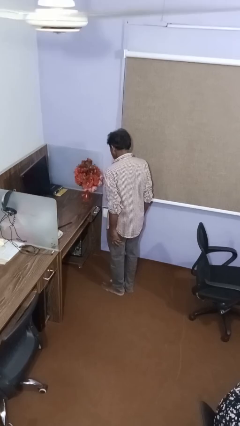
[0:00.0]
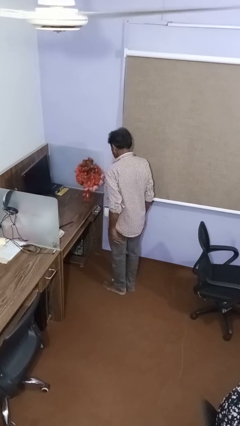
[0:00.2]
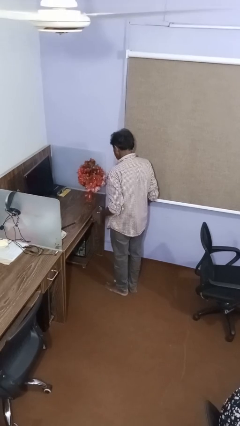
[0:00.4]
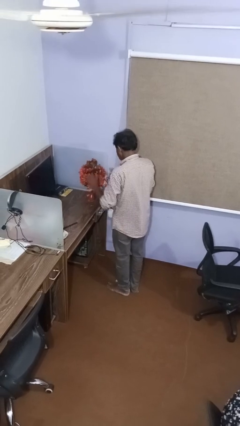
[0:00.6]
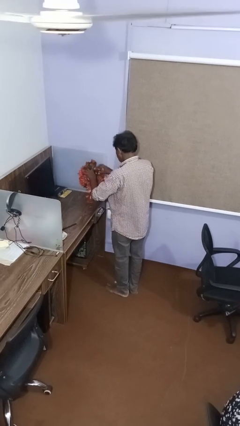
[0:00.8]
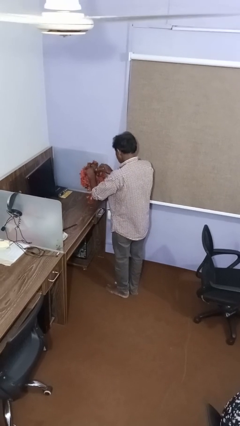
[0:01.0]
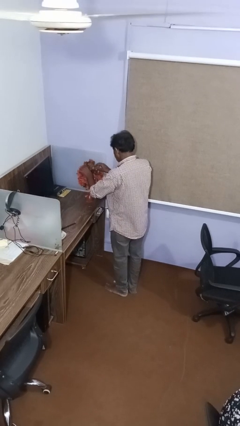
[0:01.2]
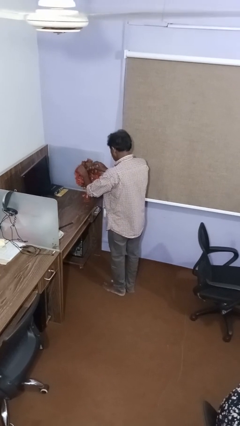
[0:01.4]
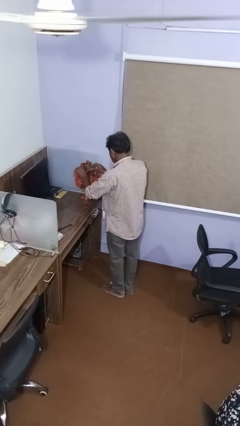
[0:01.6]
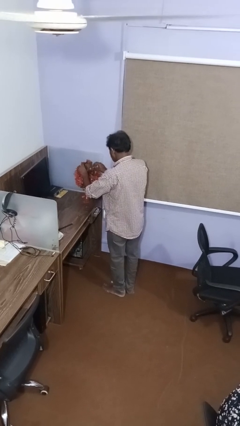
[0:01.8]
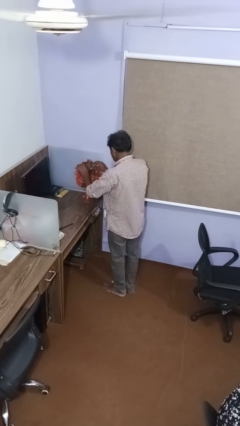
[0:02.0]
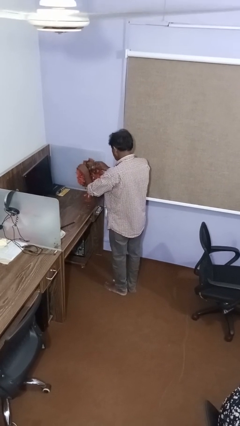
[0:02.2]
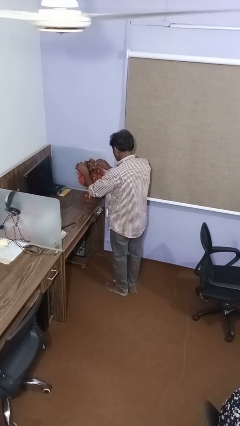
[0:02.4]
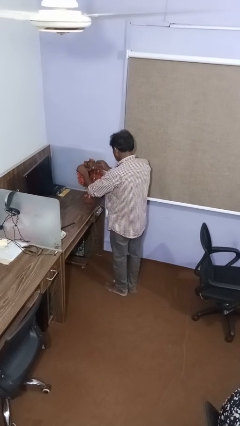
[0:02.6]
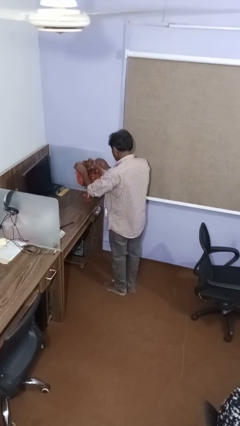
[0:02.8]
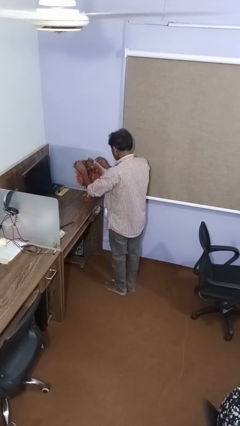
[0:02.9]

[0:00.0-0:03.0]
person arranges flowers in vase

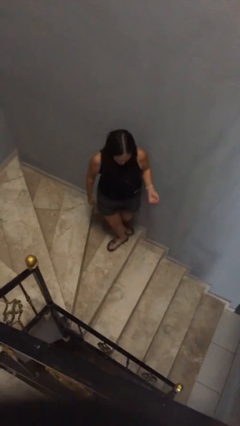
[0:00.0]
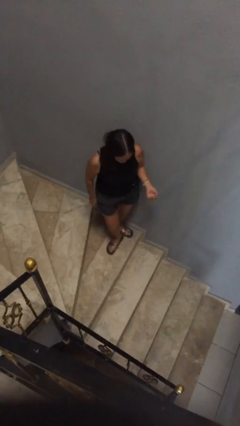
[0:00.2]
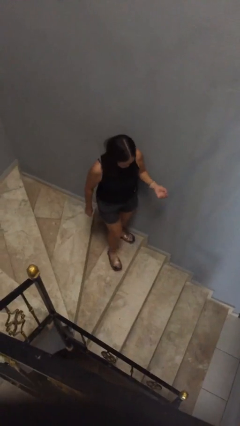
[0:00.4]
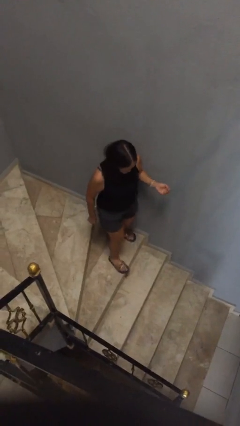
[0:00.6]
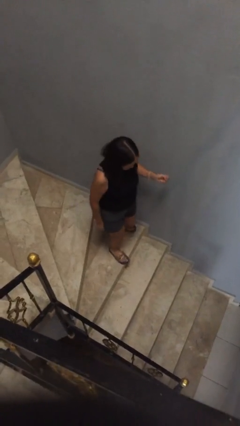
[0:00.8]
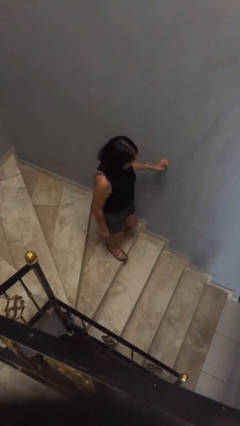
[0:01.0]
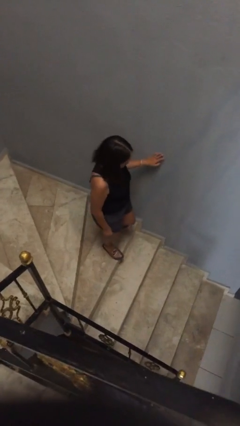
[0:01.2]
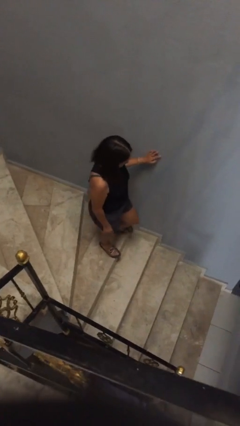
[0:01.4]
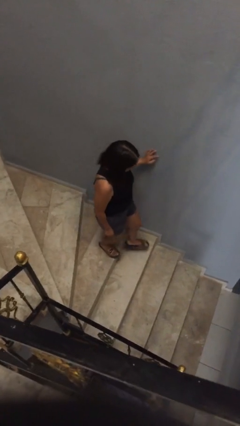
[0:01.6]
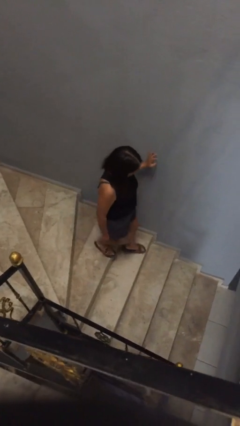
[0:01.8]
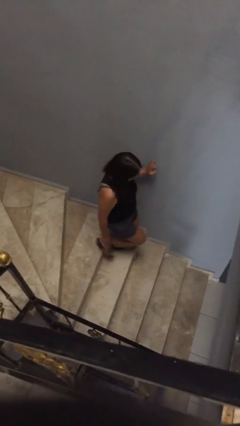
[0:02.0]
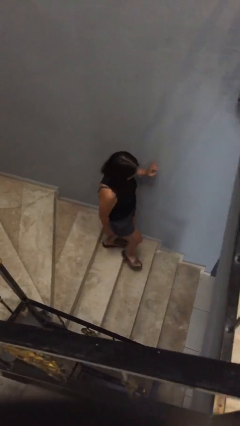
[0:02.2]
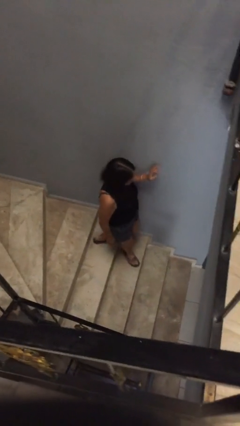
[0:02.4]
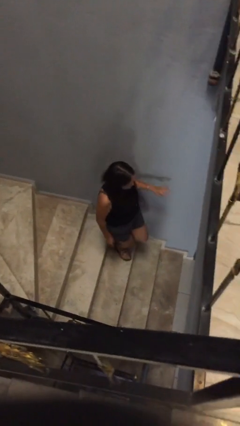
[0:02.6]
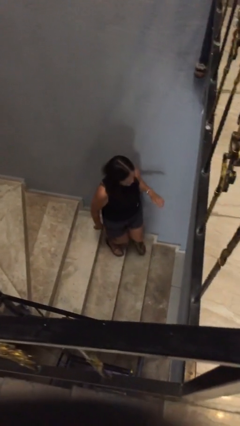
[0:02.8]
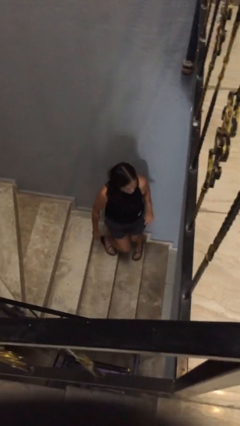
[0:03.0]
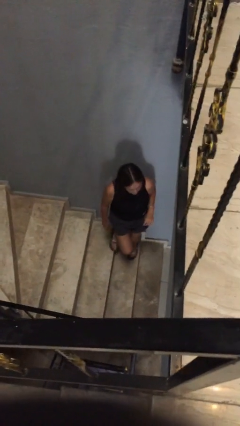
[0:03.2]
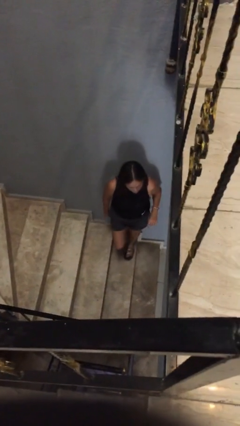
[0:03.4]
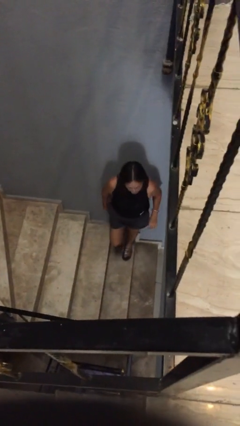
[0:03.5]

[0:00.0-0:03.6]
person climbs down stairs

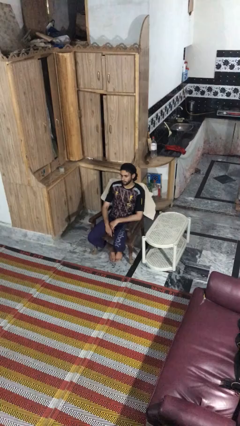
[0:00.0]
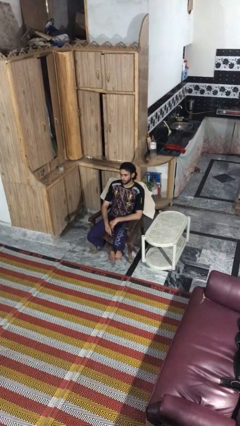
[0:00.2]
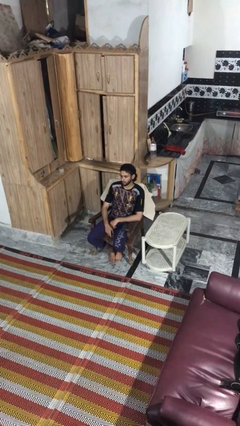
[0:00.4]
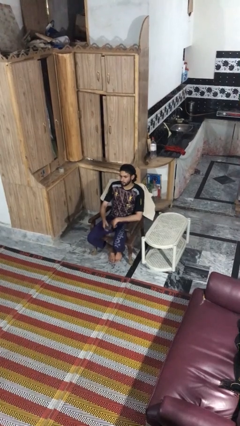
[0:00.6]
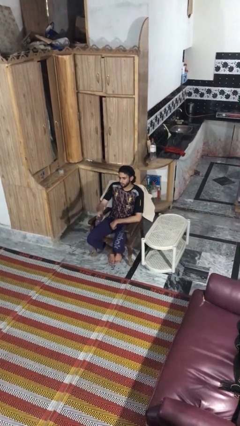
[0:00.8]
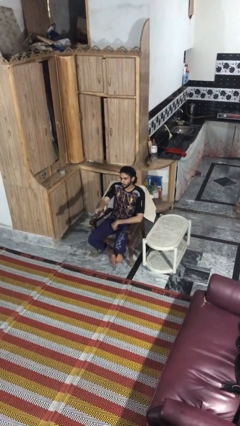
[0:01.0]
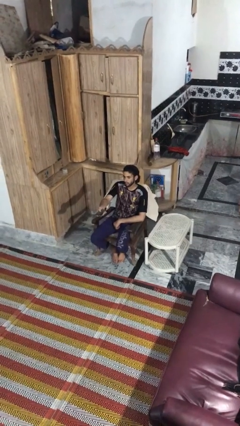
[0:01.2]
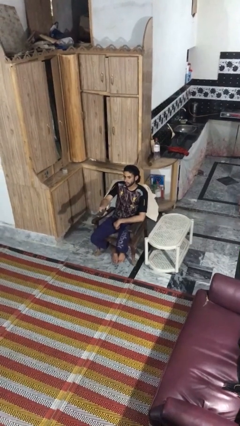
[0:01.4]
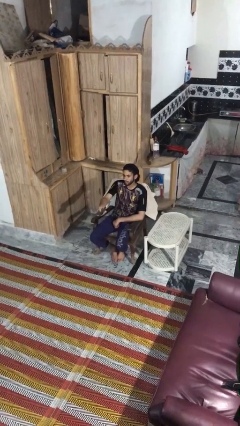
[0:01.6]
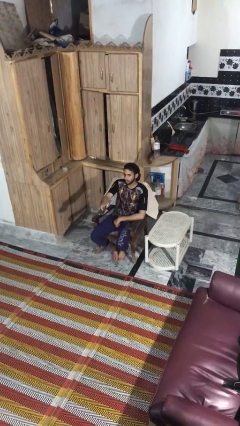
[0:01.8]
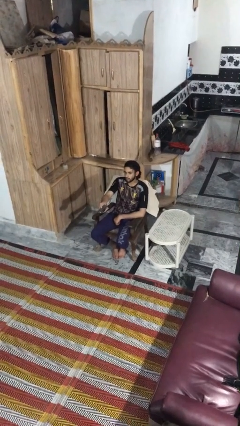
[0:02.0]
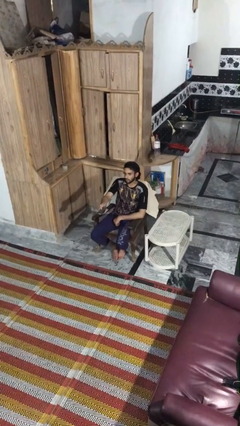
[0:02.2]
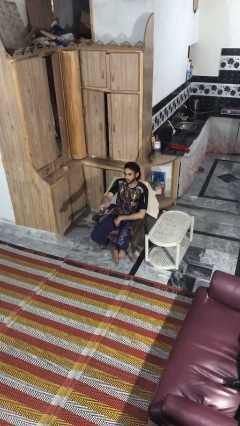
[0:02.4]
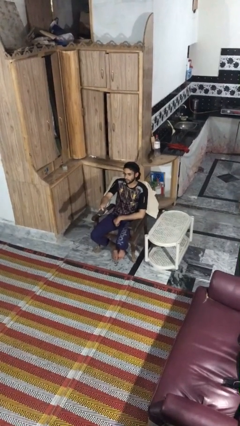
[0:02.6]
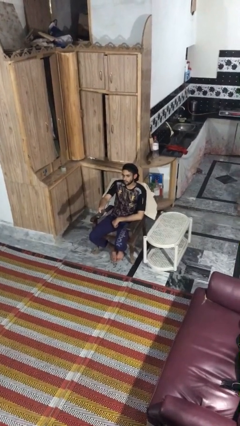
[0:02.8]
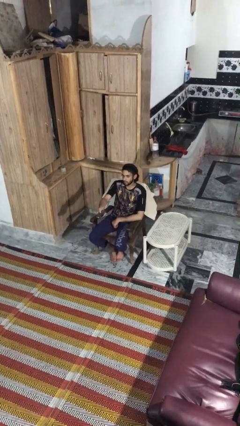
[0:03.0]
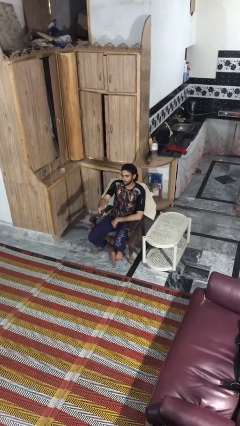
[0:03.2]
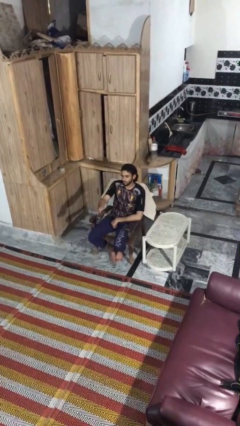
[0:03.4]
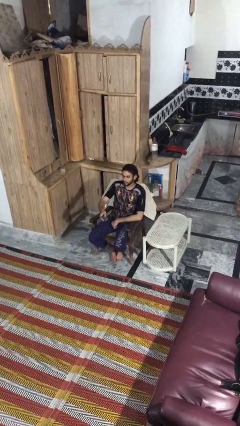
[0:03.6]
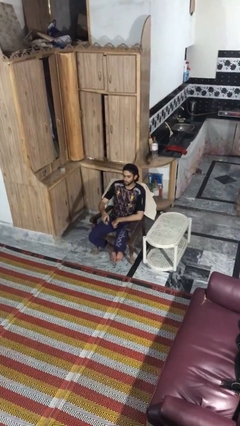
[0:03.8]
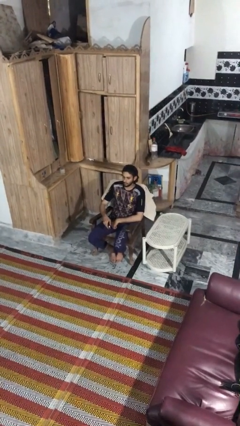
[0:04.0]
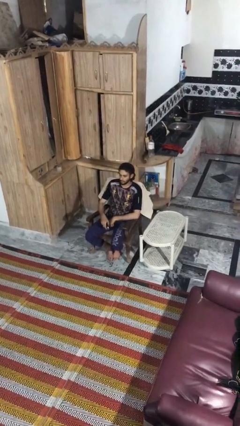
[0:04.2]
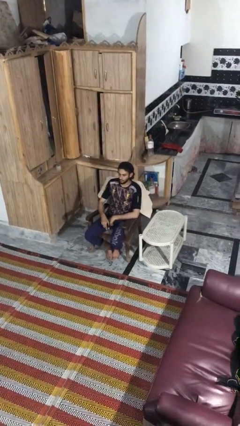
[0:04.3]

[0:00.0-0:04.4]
person uses television remote

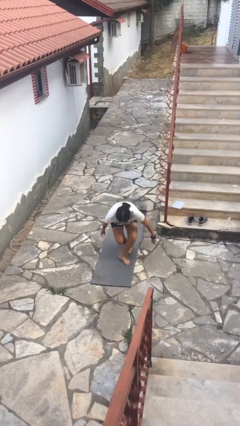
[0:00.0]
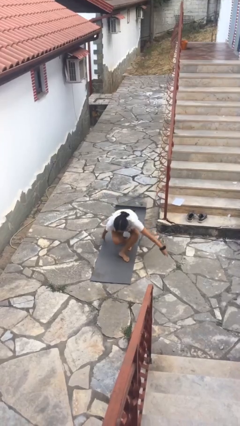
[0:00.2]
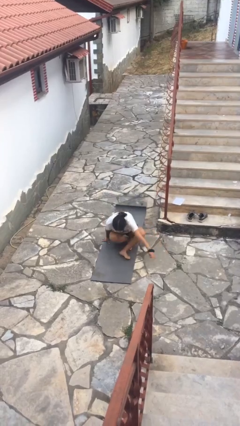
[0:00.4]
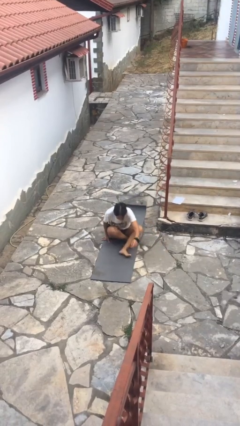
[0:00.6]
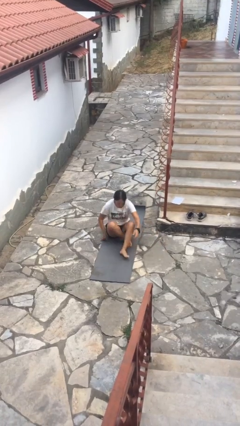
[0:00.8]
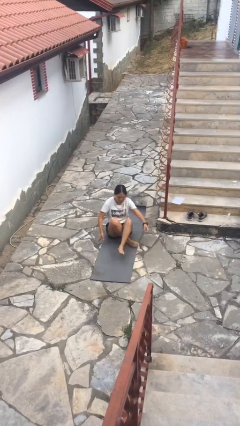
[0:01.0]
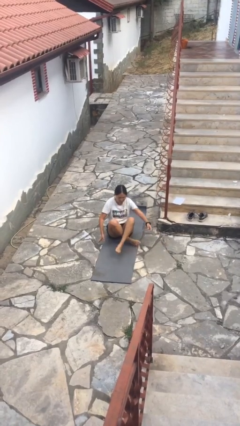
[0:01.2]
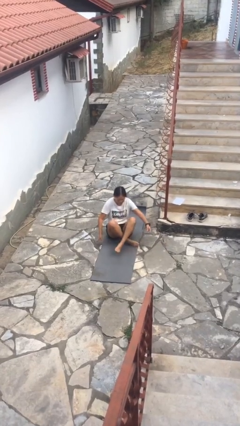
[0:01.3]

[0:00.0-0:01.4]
person sits crisscross

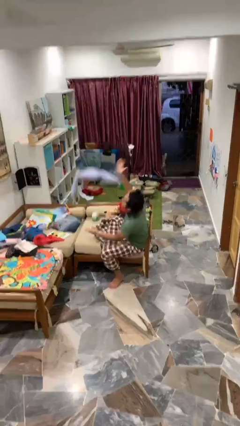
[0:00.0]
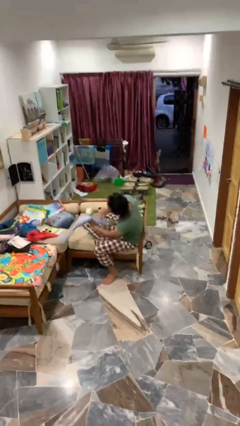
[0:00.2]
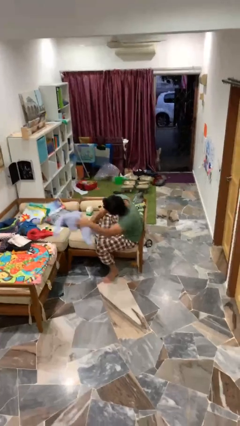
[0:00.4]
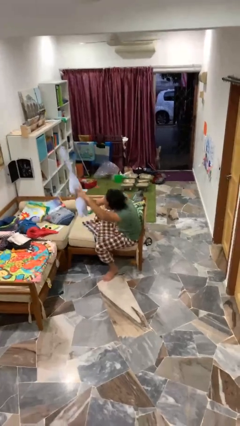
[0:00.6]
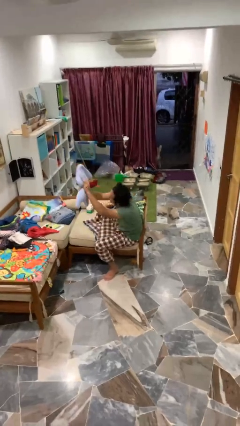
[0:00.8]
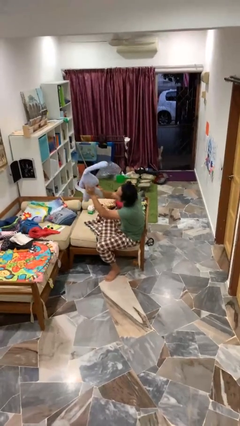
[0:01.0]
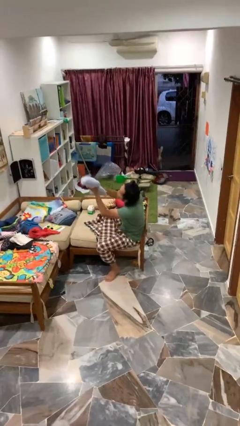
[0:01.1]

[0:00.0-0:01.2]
person catches dropped object

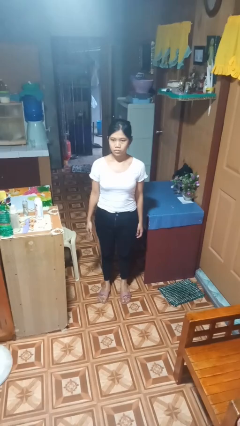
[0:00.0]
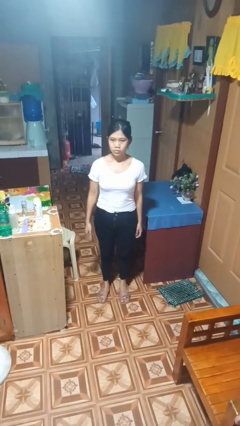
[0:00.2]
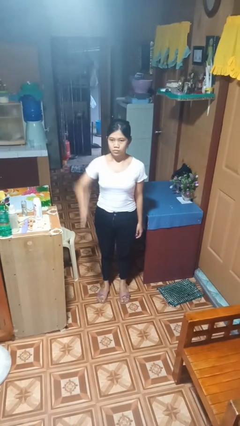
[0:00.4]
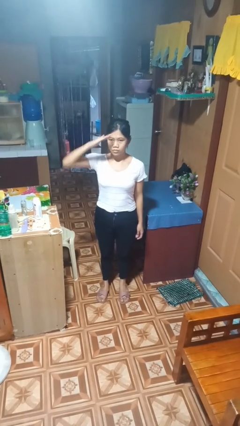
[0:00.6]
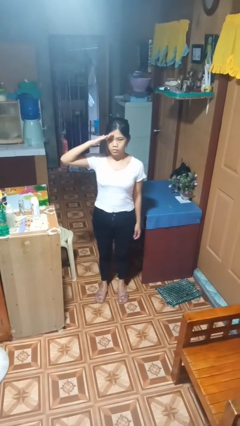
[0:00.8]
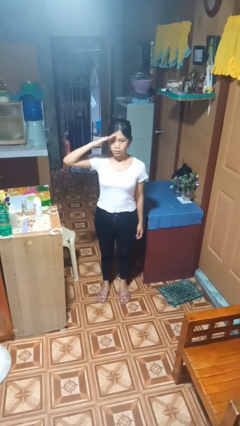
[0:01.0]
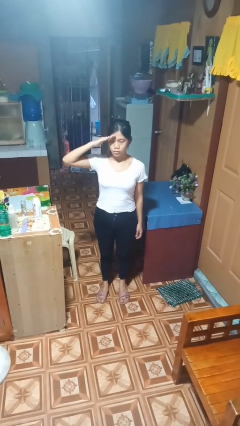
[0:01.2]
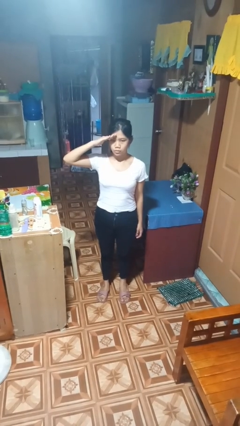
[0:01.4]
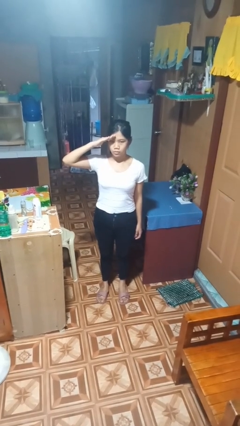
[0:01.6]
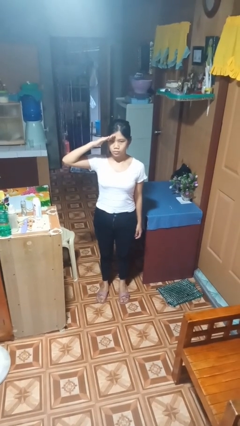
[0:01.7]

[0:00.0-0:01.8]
person salutes

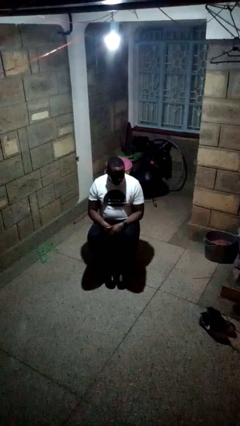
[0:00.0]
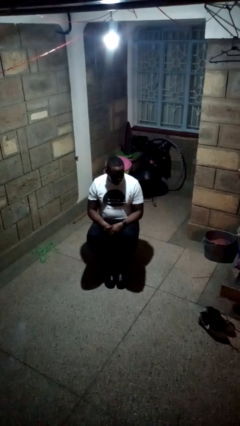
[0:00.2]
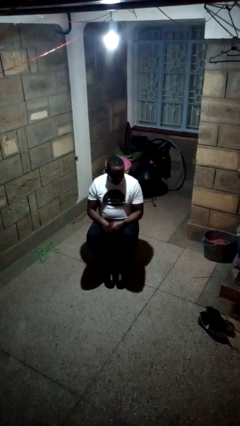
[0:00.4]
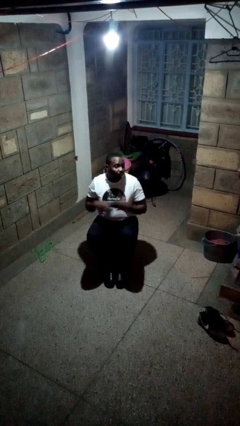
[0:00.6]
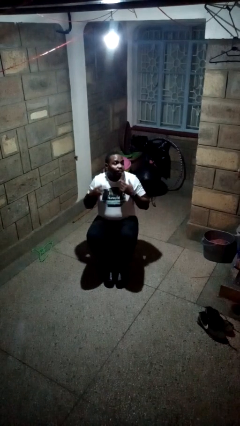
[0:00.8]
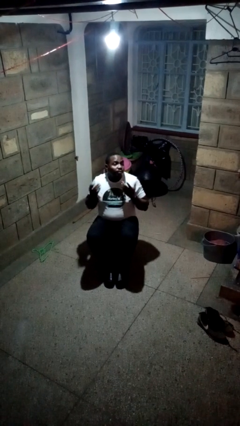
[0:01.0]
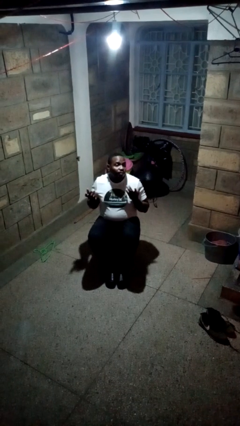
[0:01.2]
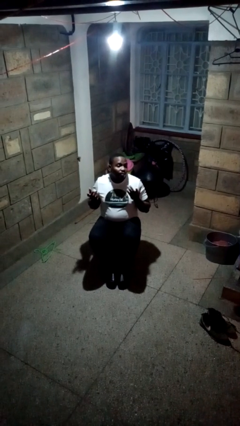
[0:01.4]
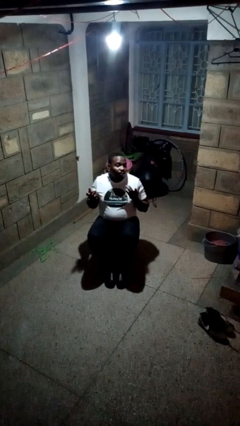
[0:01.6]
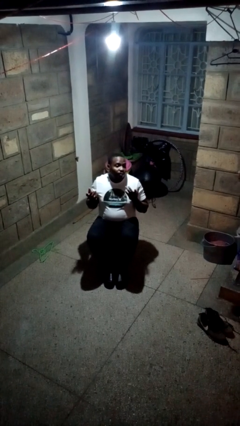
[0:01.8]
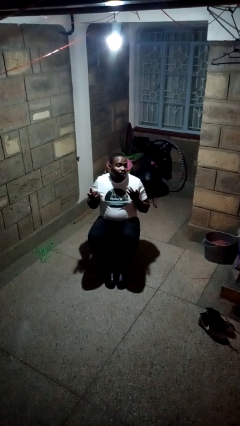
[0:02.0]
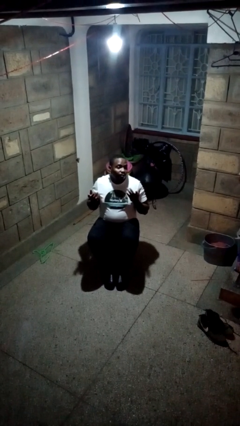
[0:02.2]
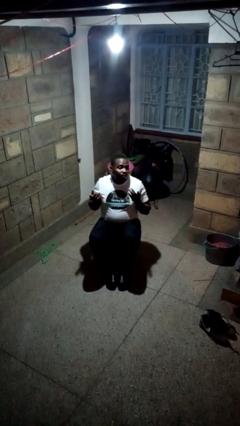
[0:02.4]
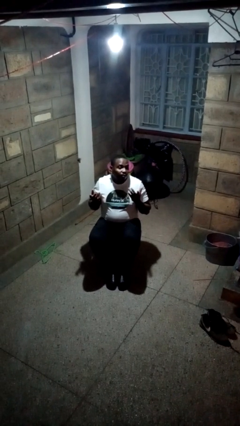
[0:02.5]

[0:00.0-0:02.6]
person shrugs
